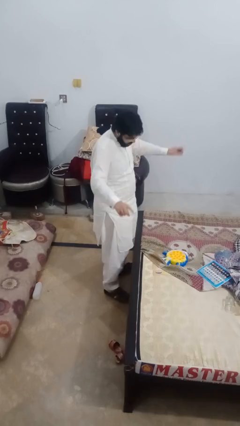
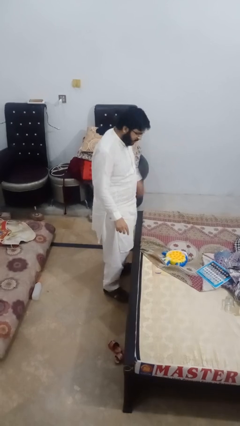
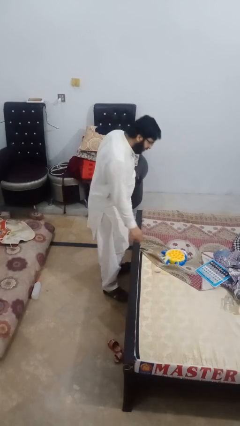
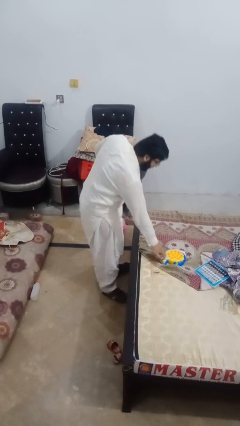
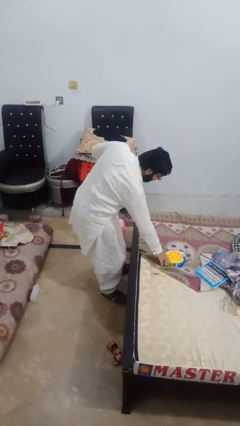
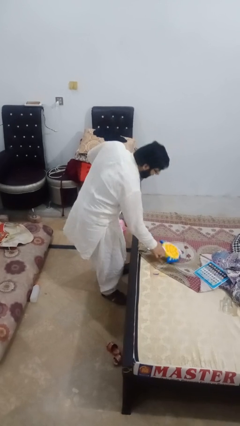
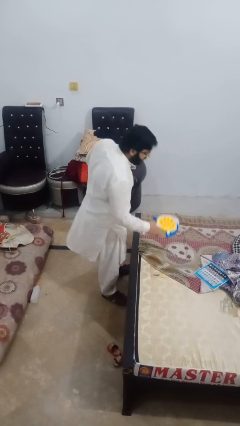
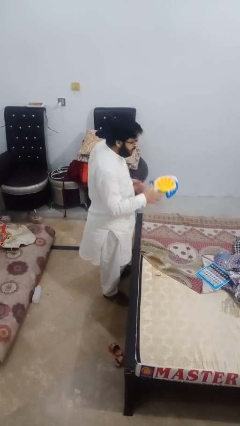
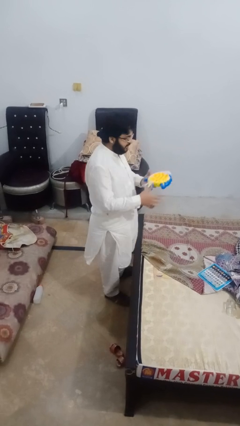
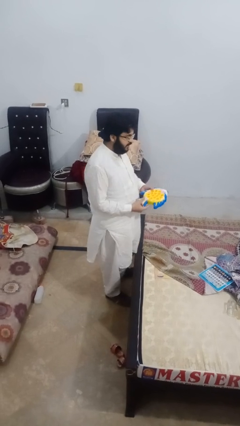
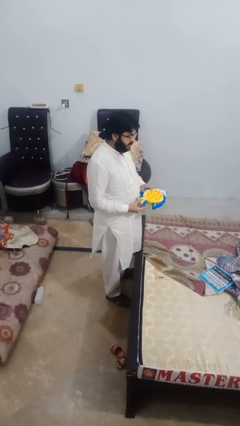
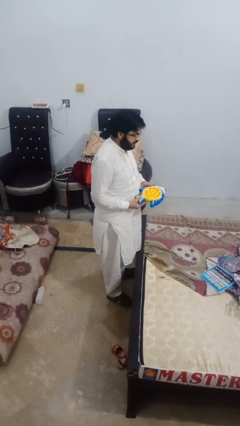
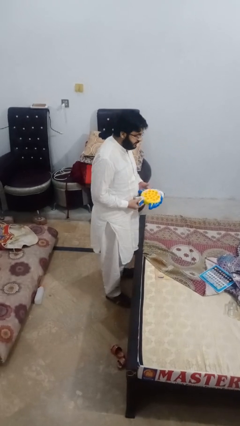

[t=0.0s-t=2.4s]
person picks up object from bed

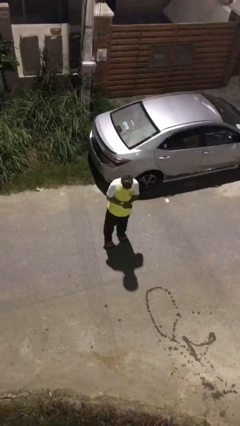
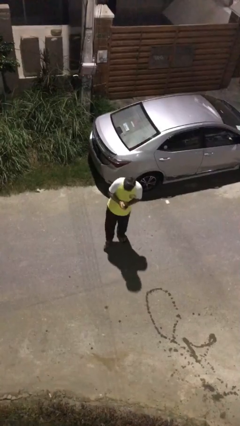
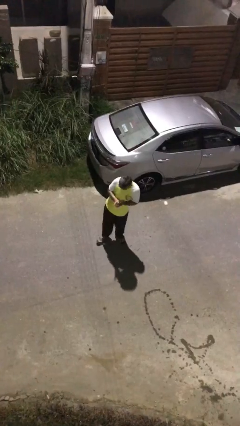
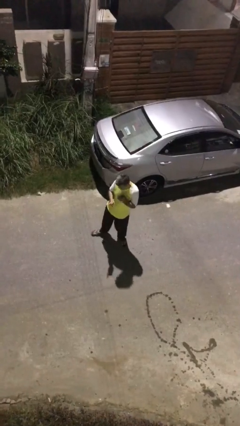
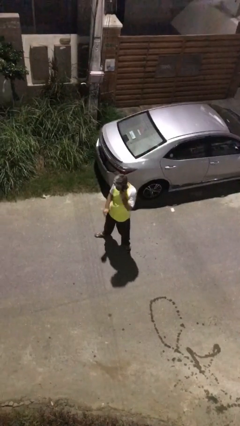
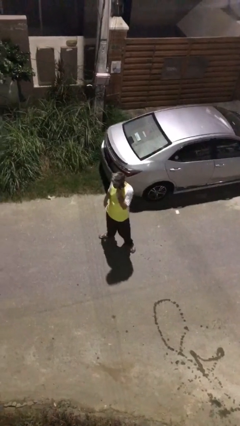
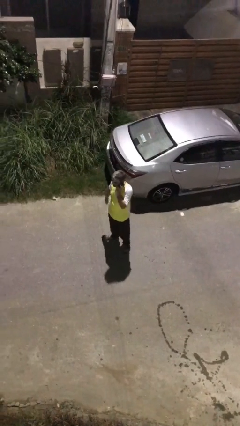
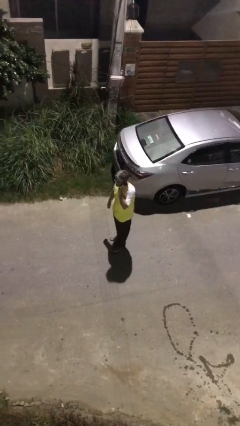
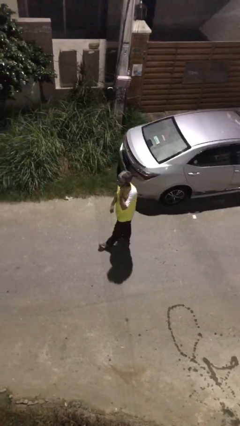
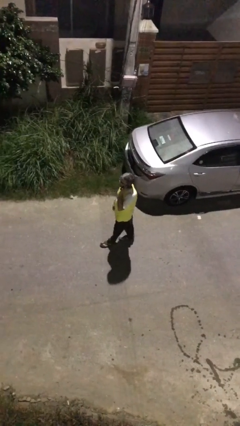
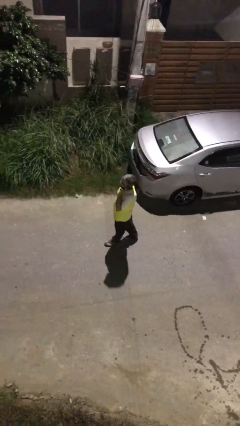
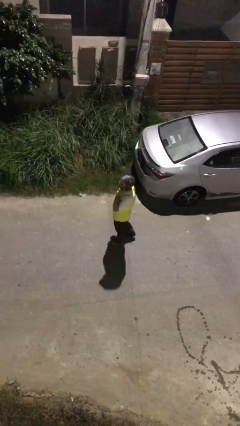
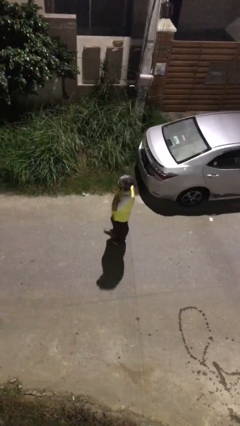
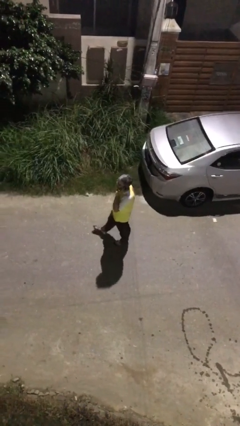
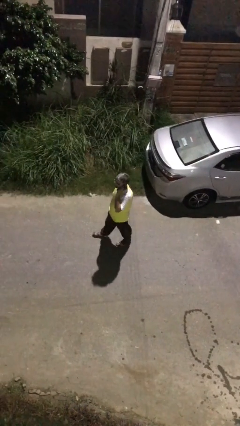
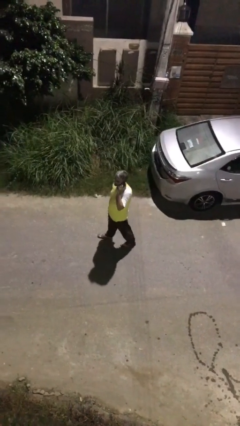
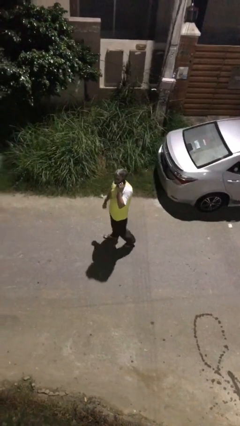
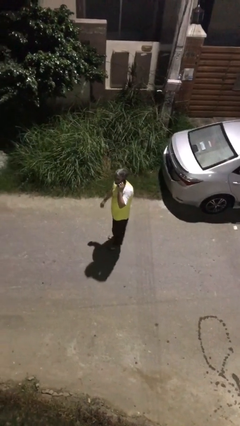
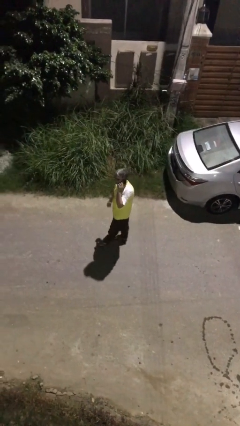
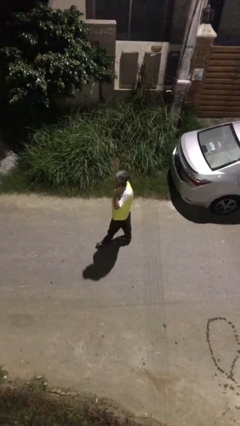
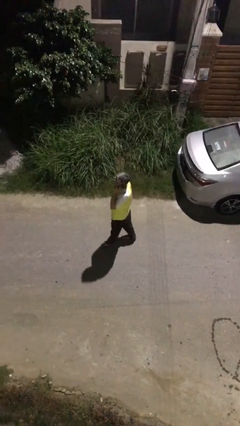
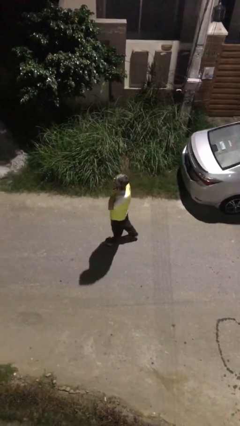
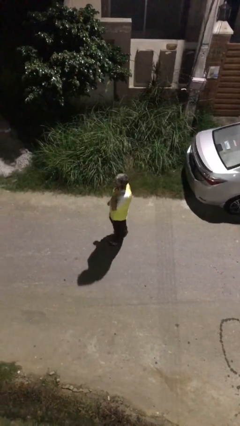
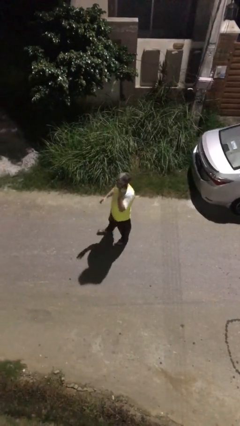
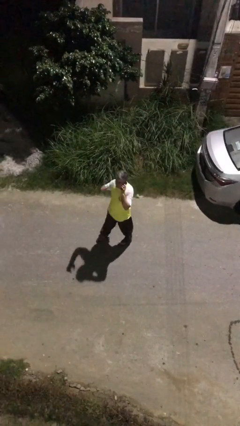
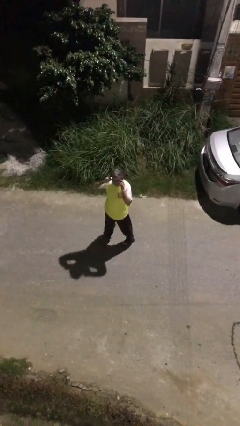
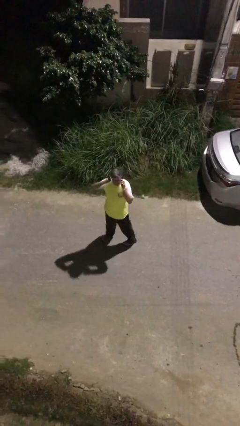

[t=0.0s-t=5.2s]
person talks on phone

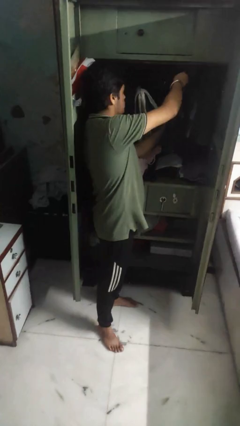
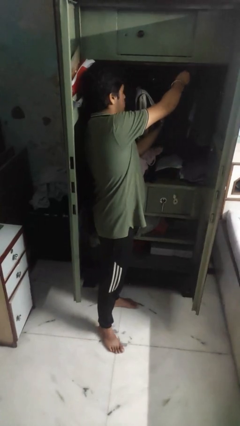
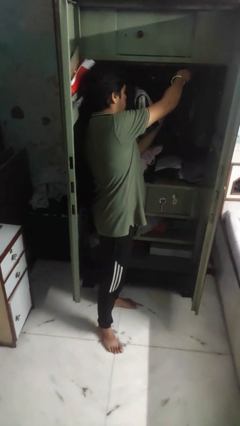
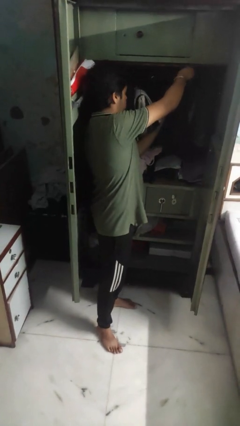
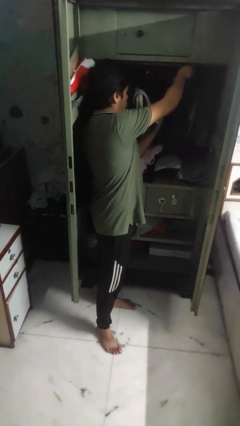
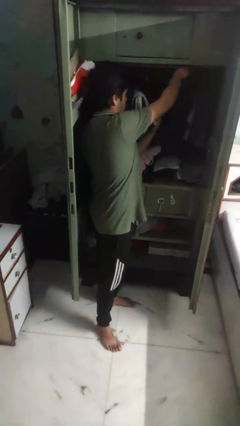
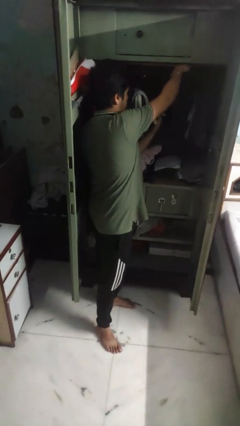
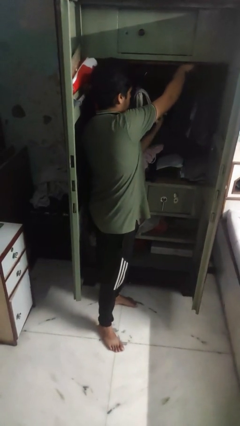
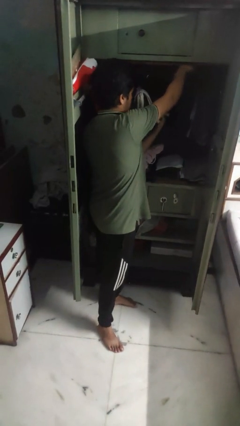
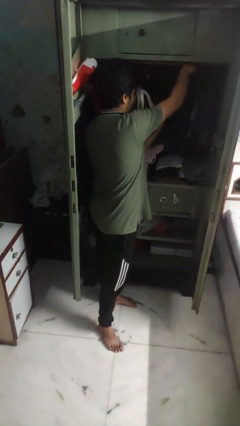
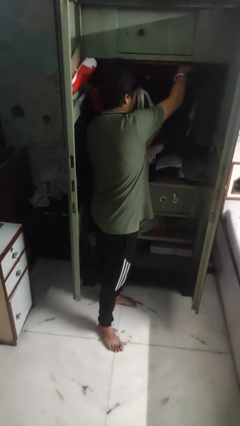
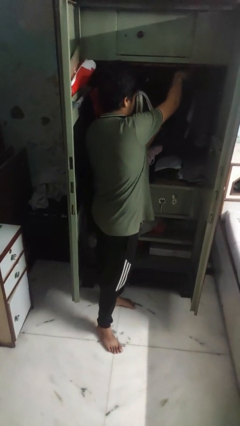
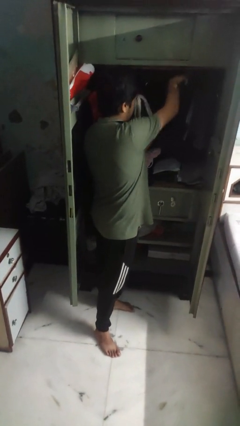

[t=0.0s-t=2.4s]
person puts clothes into closet

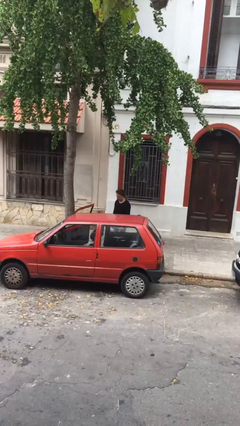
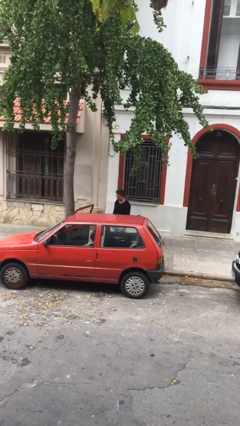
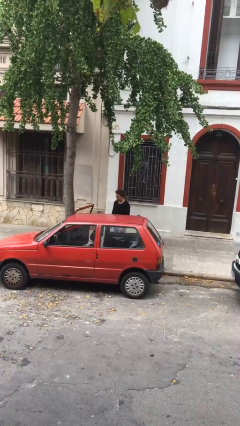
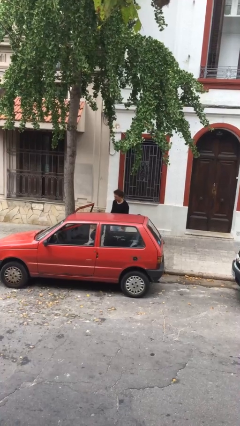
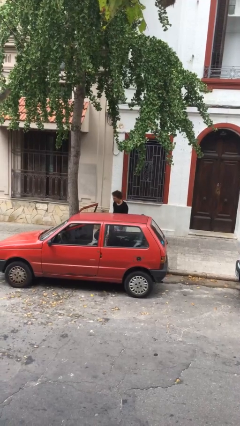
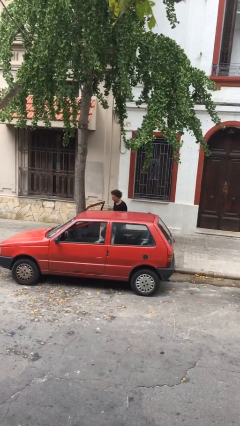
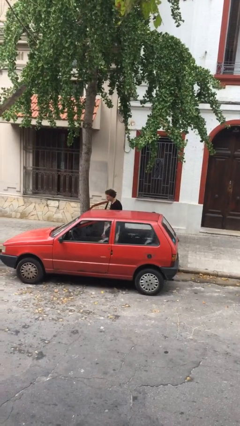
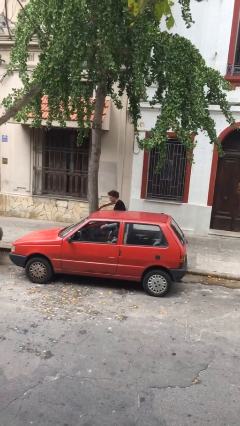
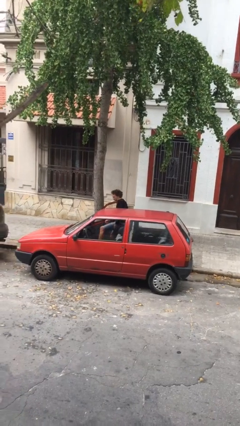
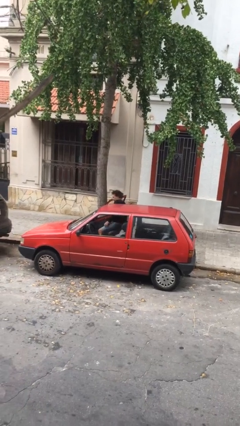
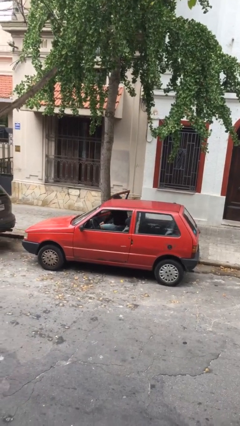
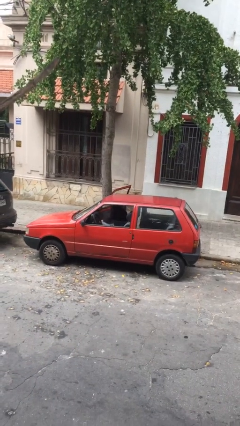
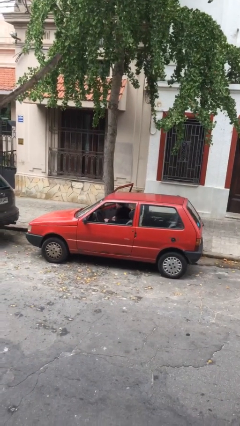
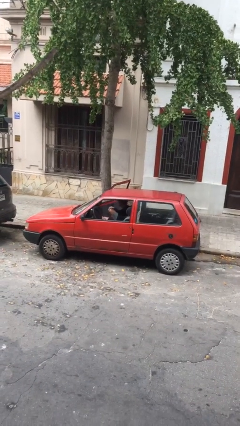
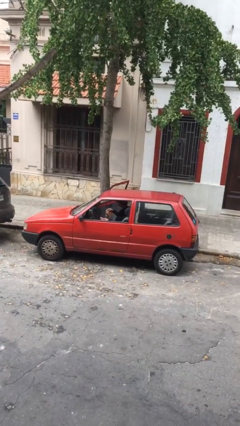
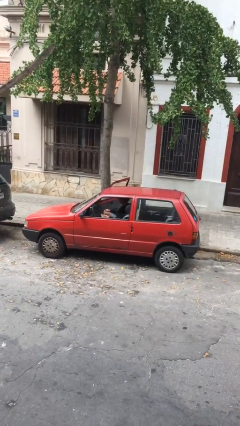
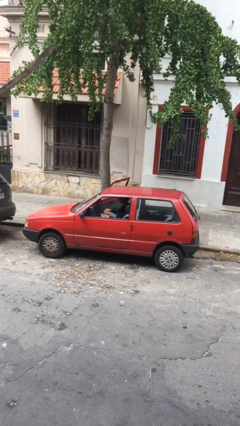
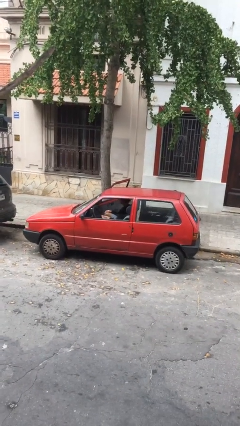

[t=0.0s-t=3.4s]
person enters car

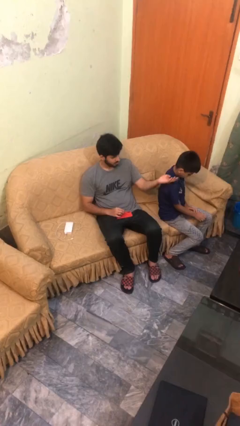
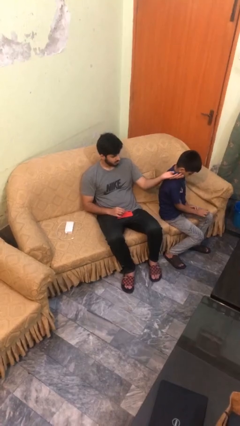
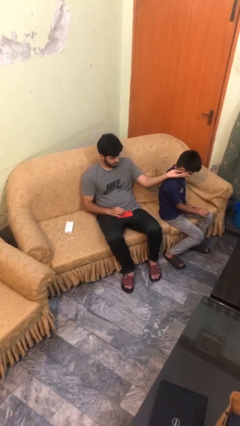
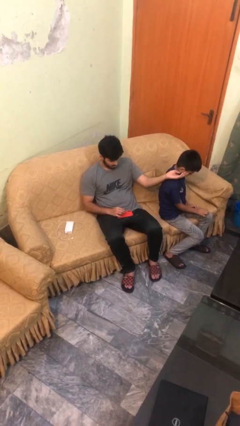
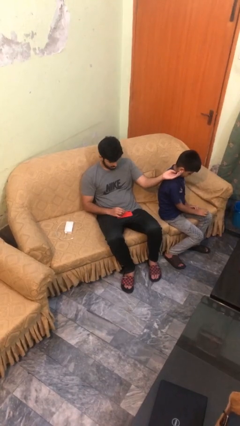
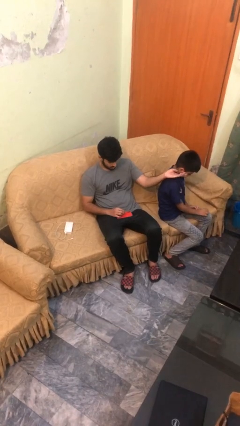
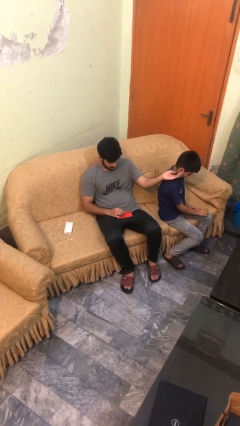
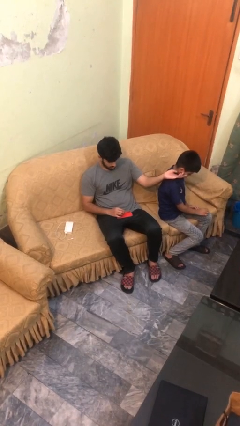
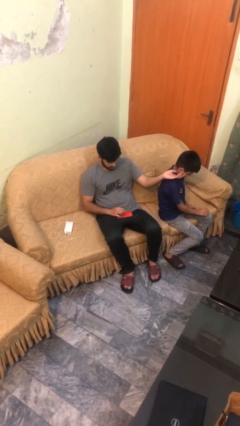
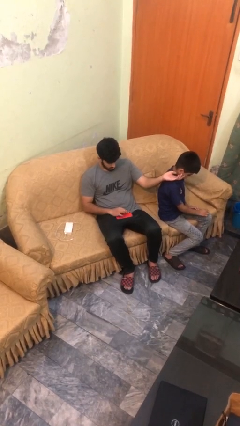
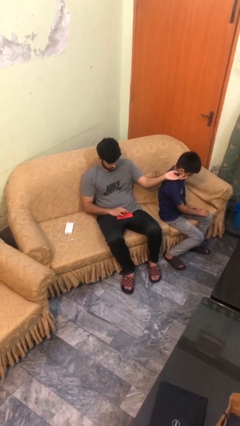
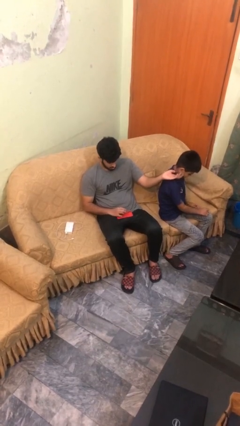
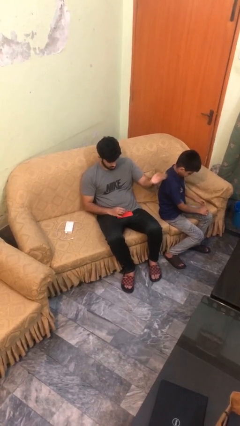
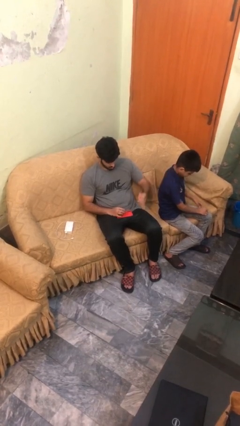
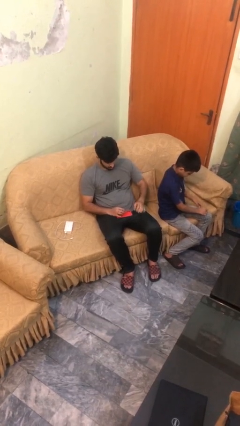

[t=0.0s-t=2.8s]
person touches face of person

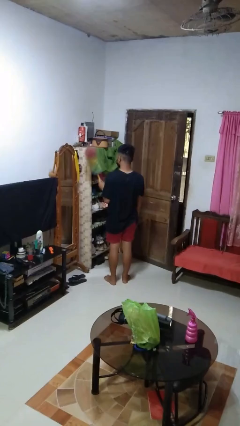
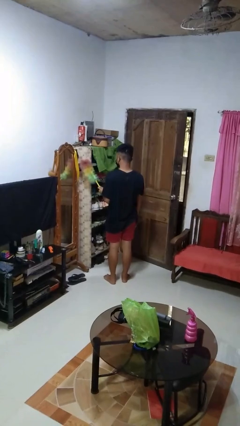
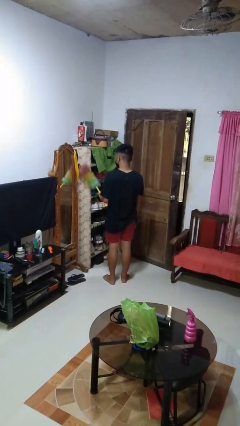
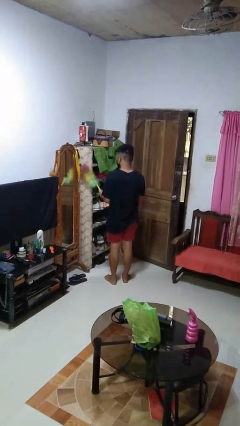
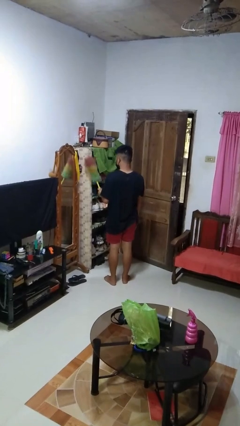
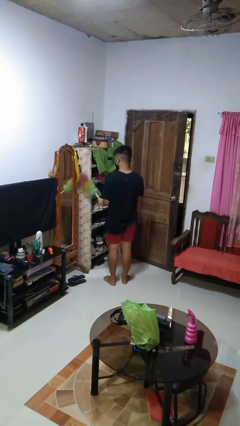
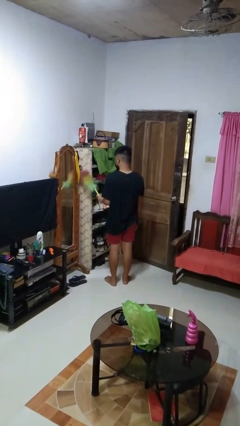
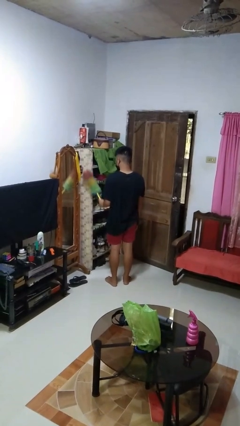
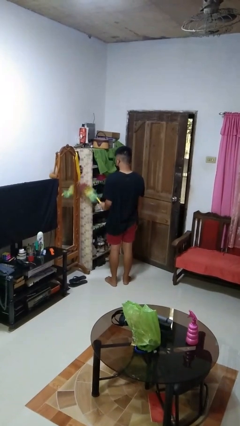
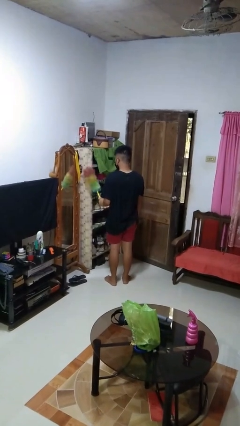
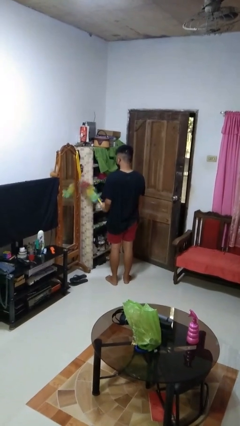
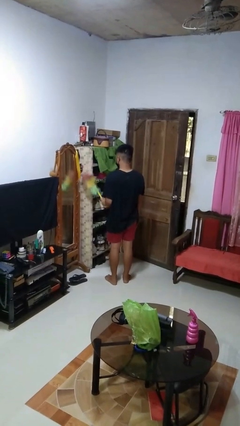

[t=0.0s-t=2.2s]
person dusts furniture
